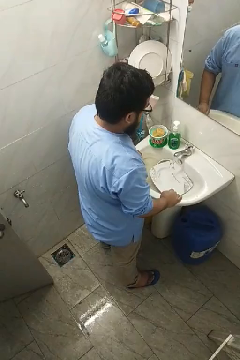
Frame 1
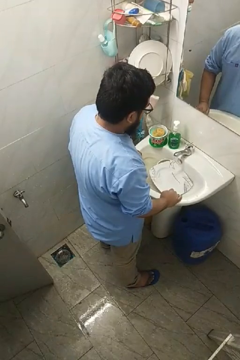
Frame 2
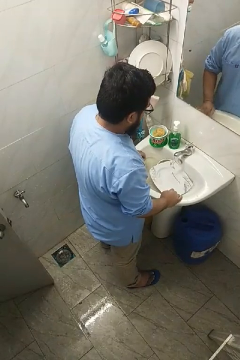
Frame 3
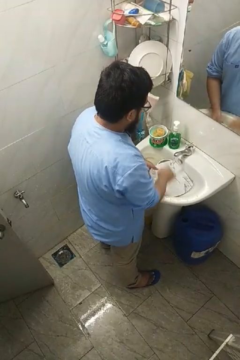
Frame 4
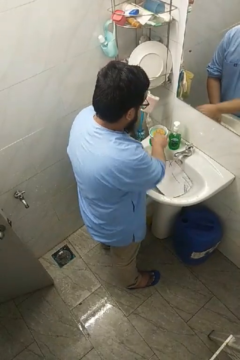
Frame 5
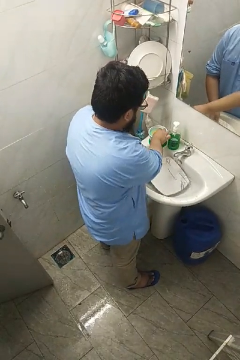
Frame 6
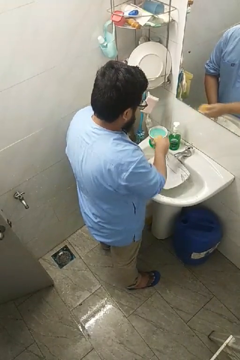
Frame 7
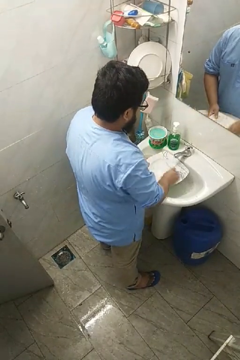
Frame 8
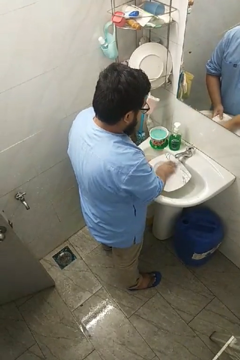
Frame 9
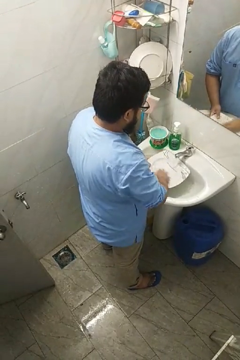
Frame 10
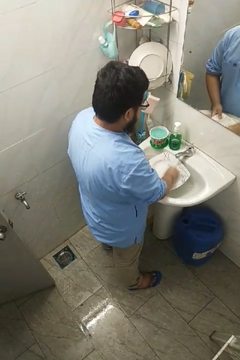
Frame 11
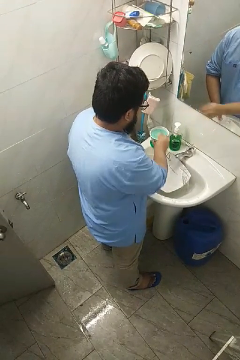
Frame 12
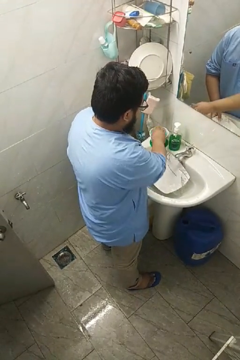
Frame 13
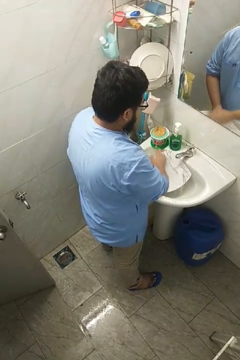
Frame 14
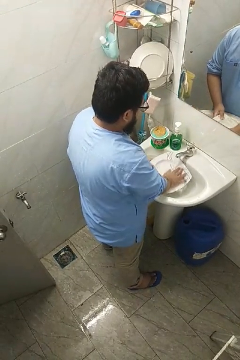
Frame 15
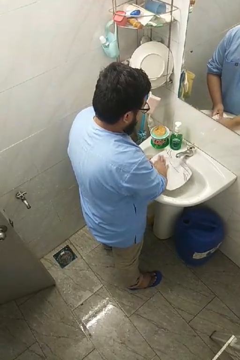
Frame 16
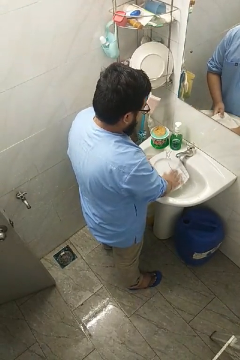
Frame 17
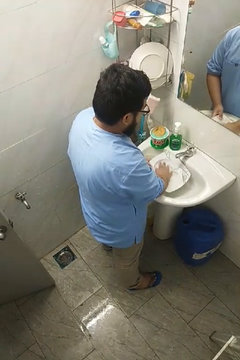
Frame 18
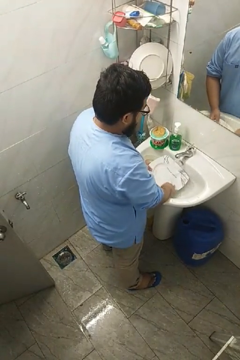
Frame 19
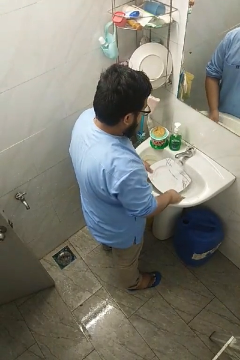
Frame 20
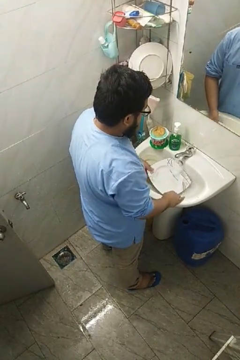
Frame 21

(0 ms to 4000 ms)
person washes dish

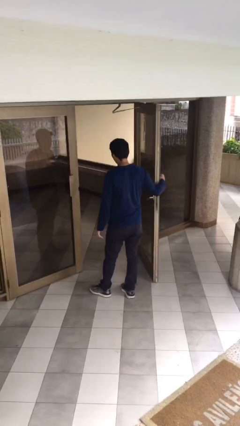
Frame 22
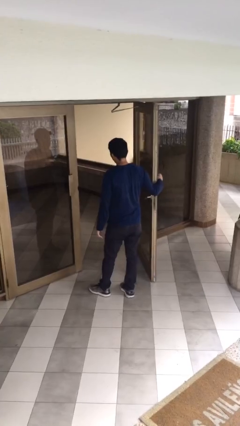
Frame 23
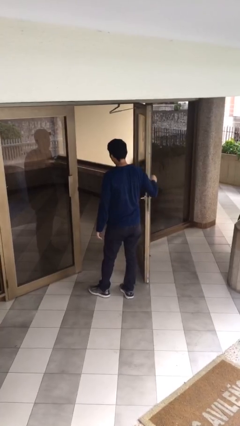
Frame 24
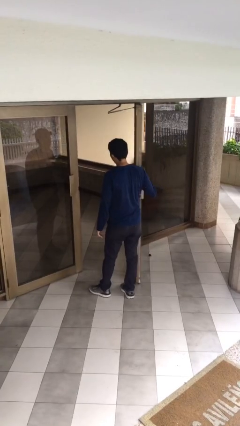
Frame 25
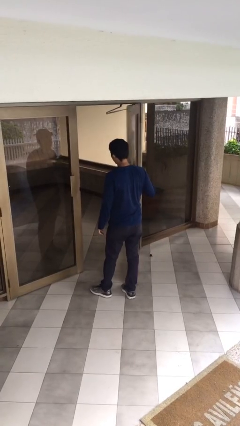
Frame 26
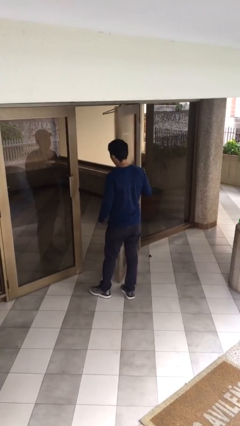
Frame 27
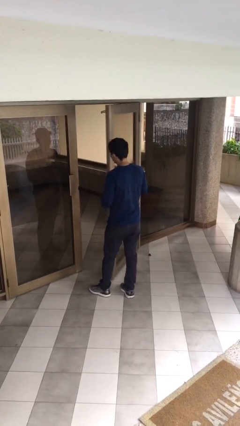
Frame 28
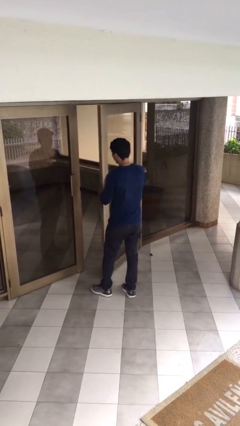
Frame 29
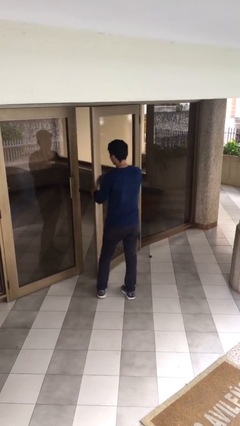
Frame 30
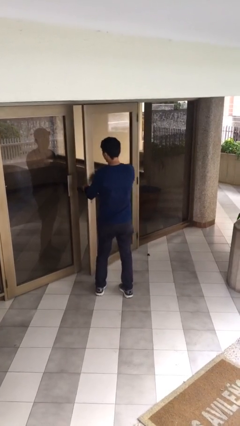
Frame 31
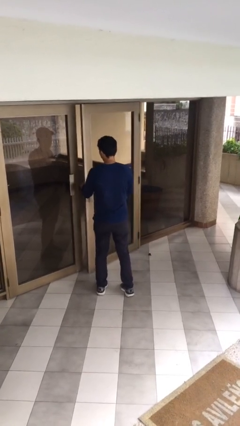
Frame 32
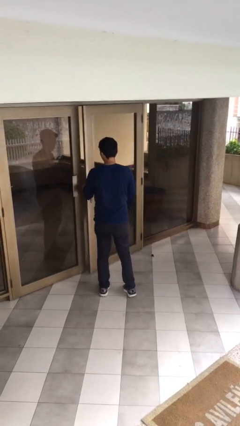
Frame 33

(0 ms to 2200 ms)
person closes facility door

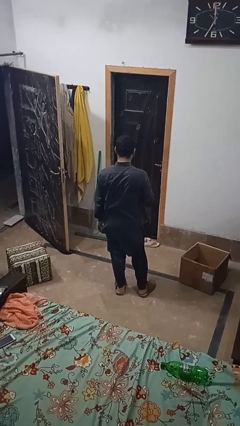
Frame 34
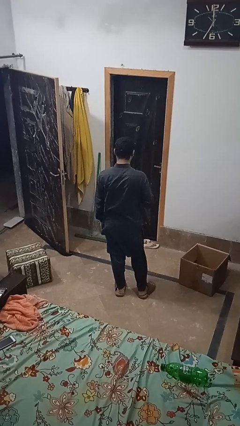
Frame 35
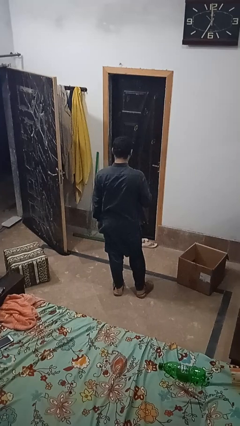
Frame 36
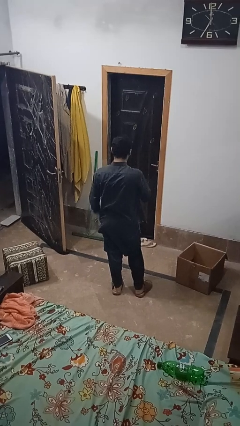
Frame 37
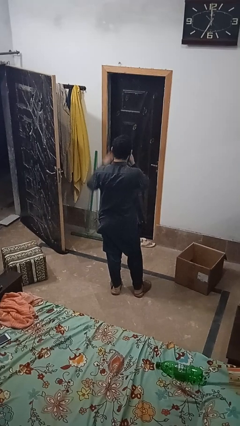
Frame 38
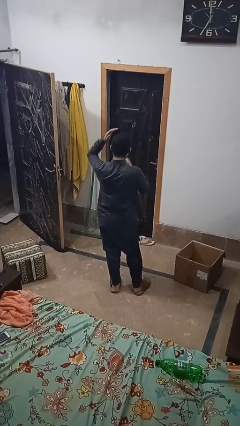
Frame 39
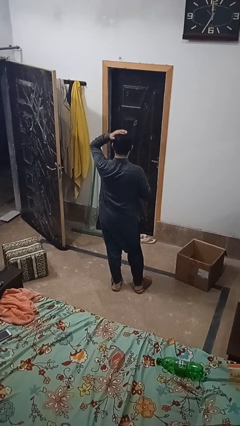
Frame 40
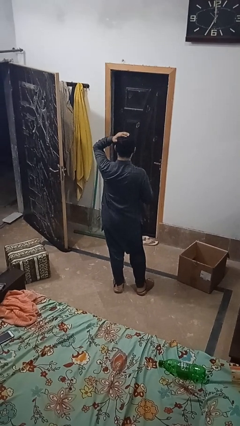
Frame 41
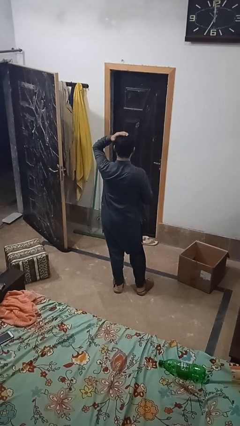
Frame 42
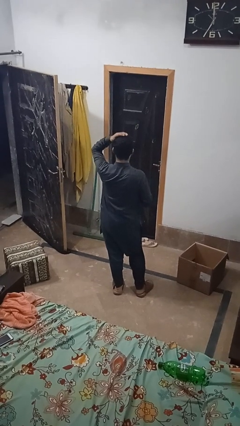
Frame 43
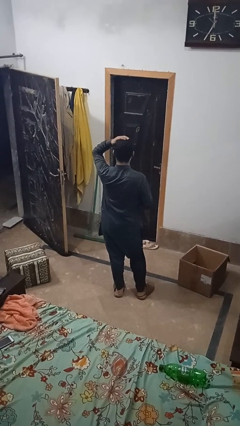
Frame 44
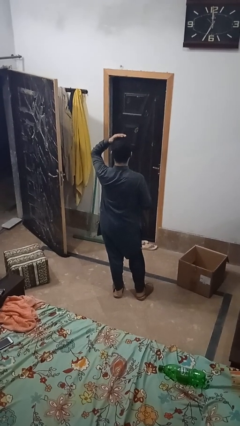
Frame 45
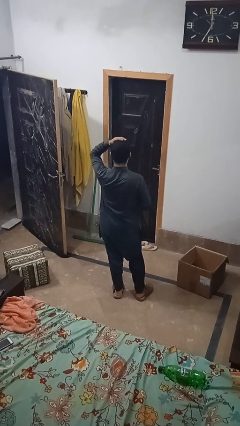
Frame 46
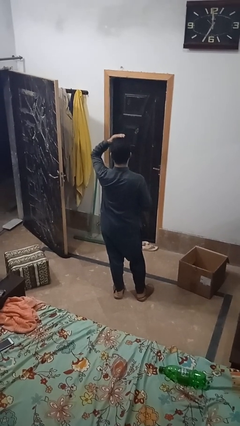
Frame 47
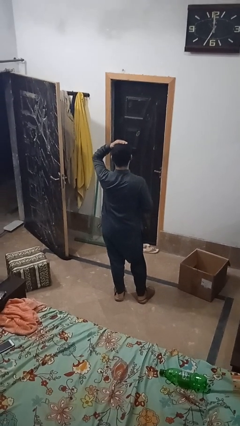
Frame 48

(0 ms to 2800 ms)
person pats head

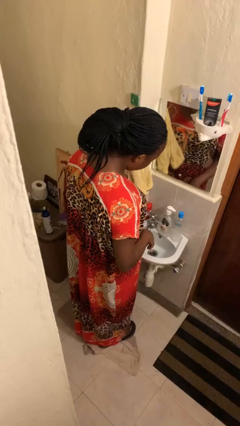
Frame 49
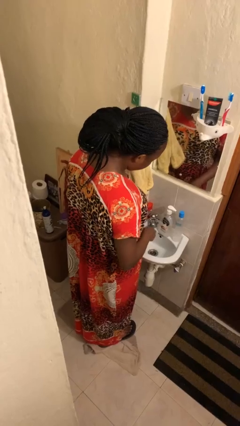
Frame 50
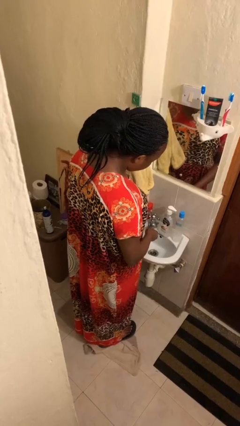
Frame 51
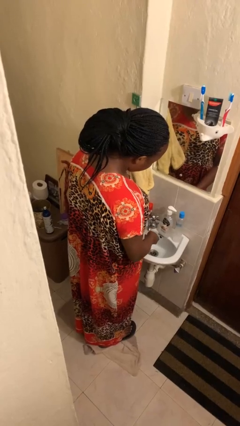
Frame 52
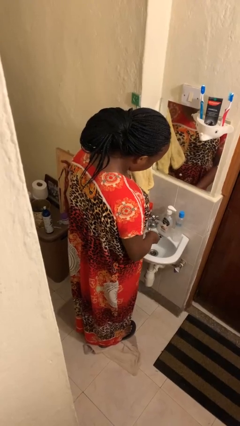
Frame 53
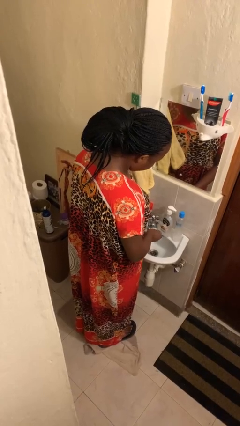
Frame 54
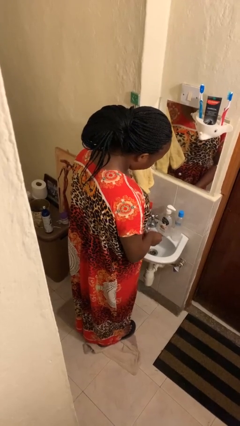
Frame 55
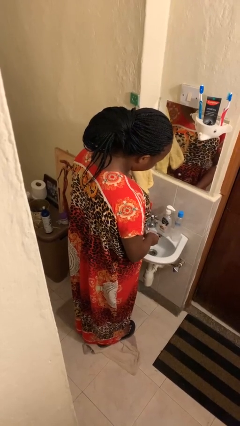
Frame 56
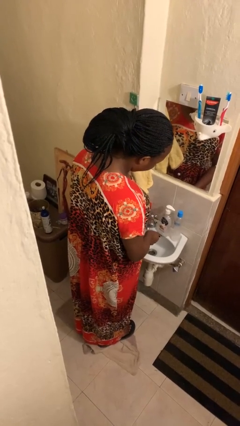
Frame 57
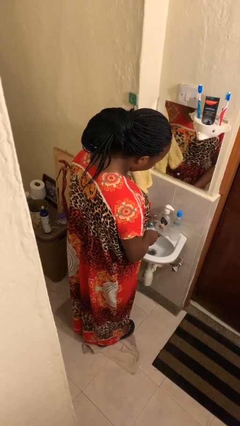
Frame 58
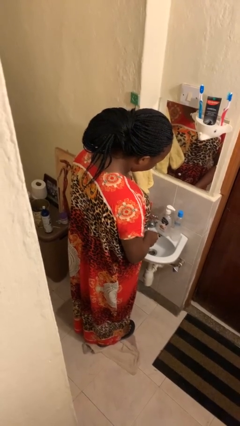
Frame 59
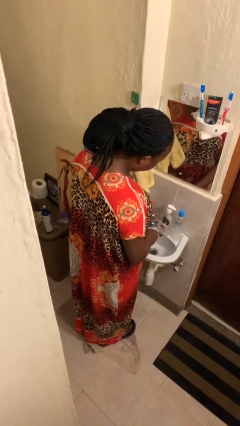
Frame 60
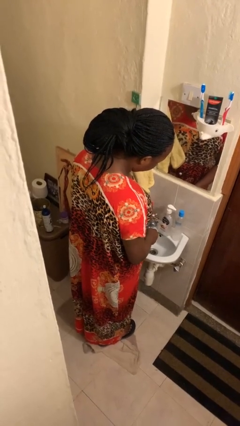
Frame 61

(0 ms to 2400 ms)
person washes hands

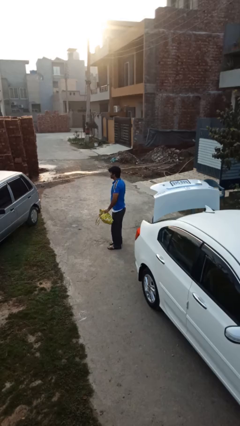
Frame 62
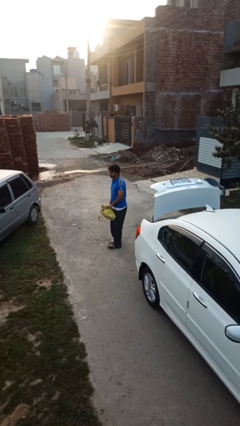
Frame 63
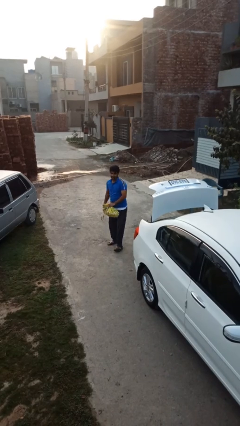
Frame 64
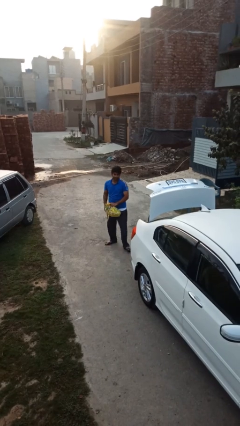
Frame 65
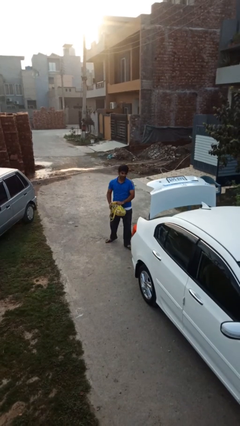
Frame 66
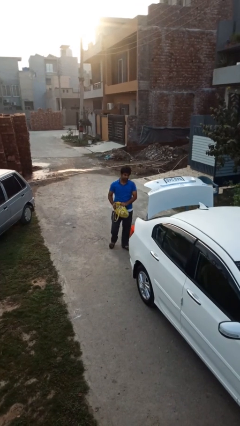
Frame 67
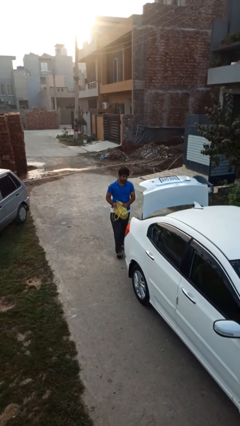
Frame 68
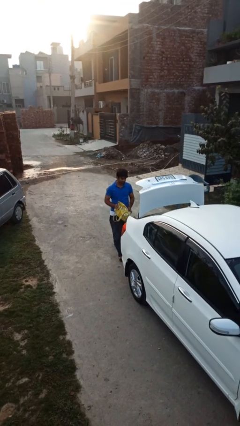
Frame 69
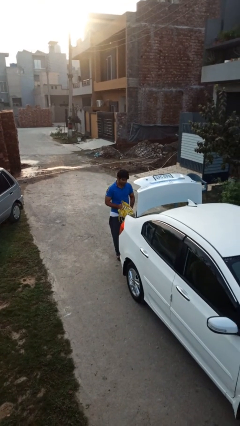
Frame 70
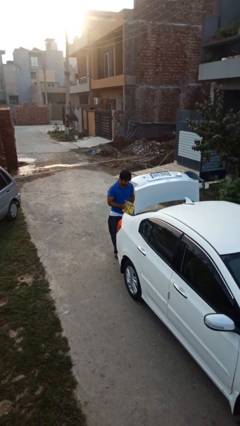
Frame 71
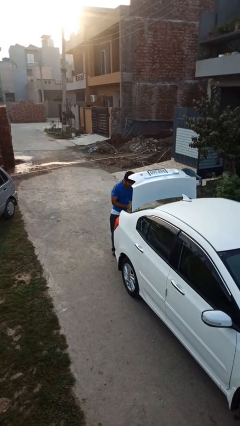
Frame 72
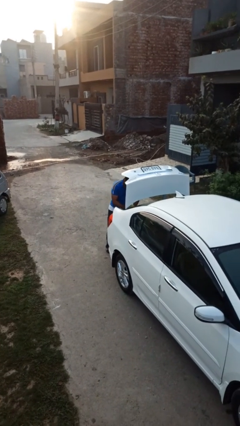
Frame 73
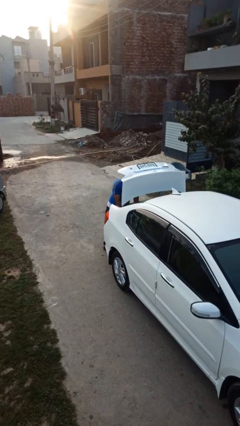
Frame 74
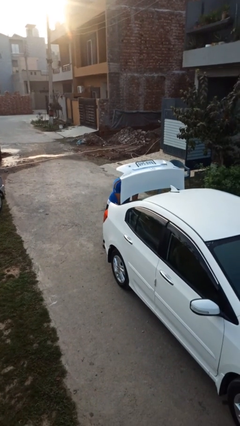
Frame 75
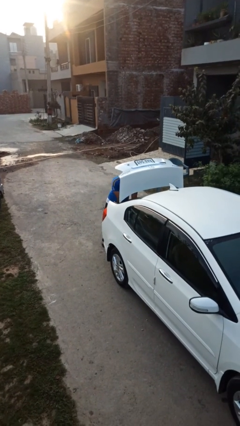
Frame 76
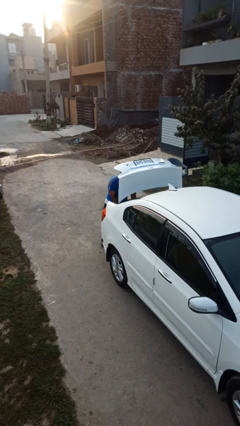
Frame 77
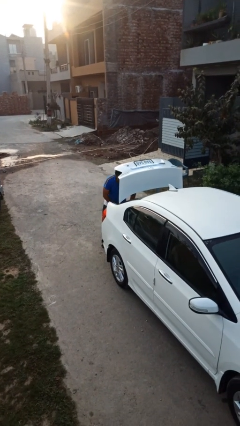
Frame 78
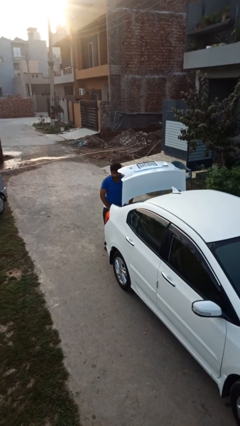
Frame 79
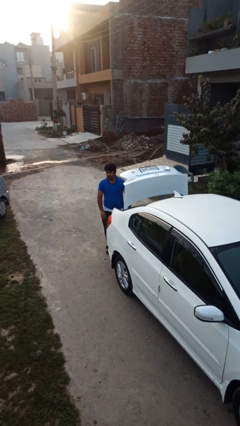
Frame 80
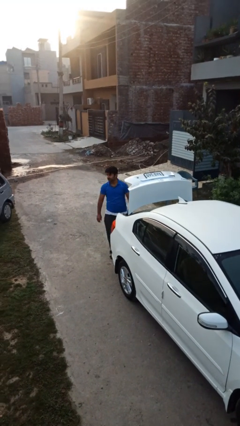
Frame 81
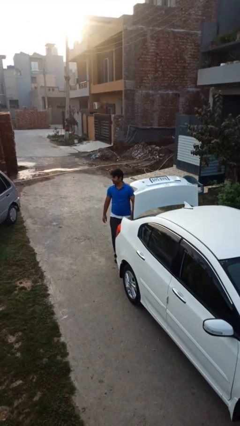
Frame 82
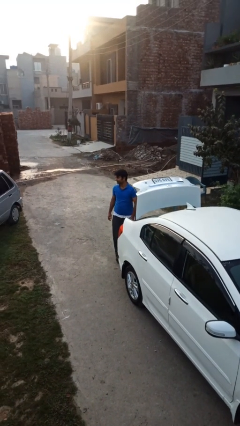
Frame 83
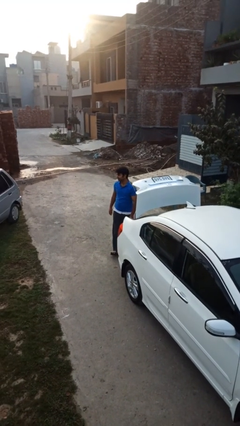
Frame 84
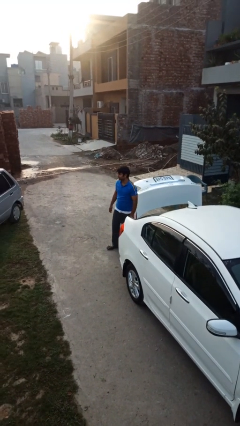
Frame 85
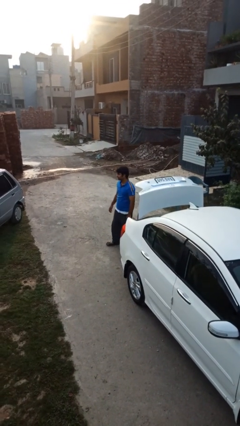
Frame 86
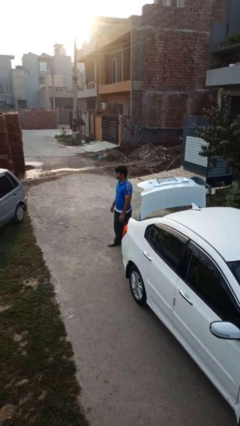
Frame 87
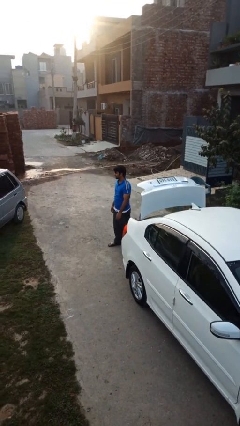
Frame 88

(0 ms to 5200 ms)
person loads car

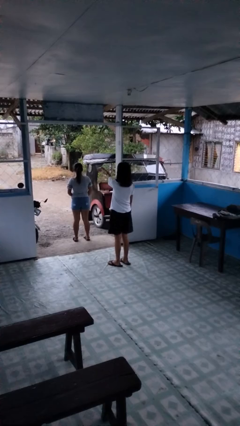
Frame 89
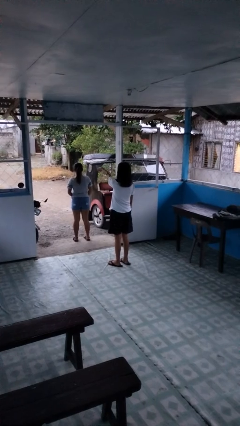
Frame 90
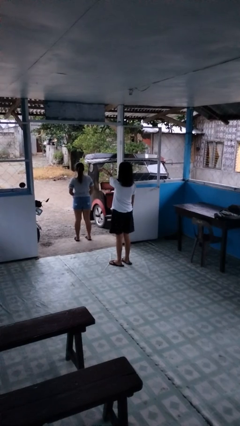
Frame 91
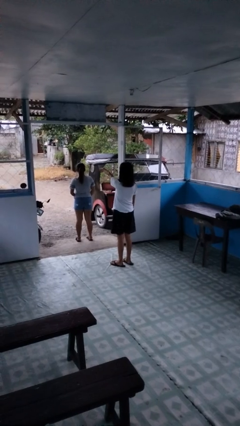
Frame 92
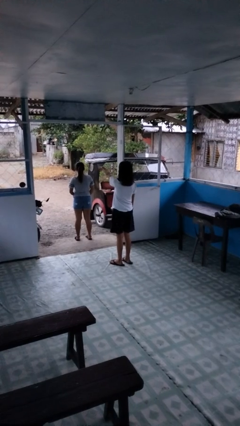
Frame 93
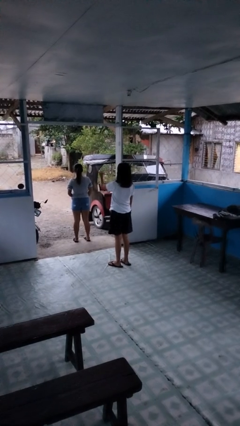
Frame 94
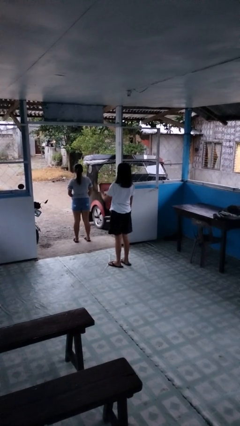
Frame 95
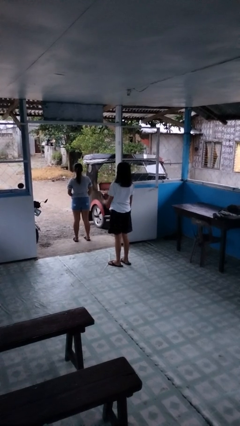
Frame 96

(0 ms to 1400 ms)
person points at person
